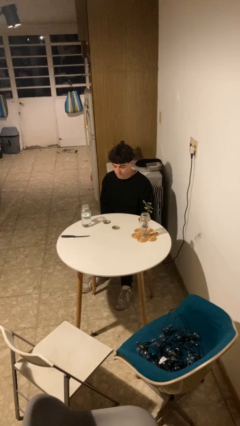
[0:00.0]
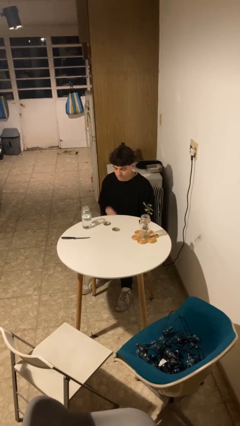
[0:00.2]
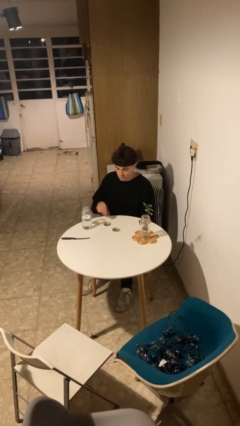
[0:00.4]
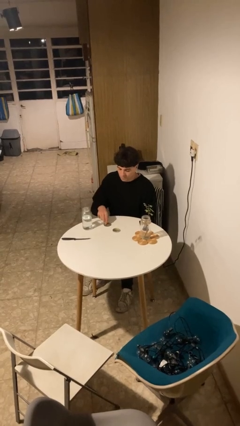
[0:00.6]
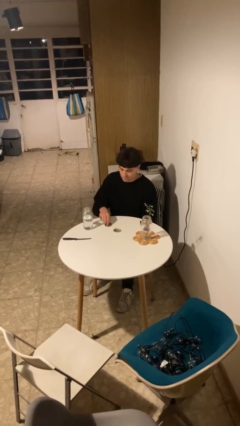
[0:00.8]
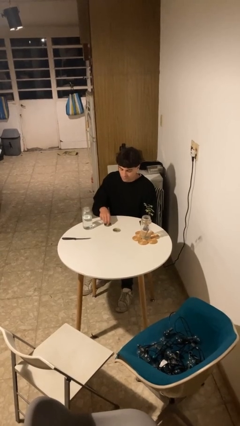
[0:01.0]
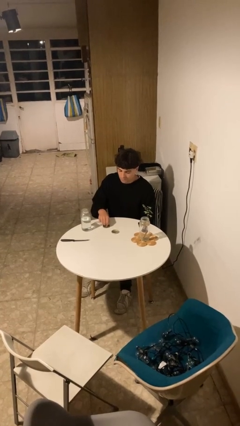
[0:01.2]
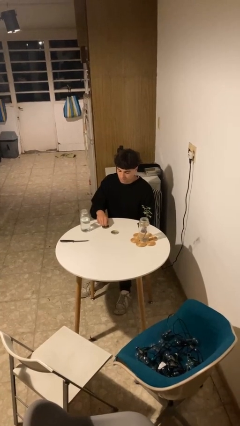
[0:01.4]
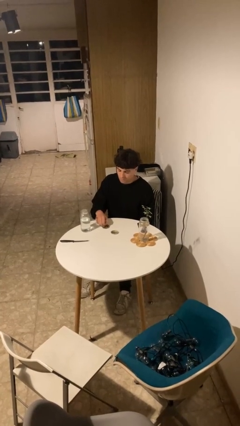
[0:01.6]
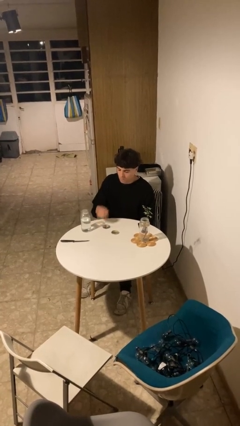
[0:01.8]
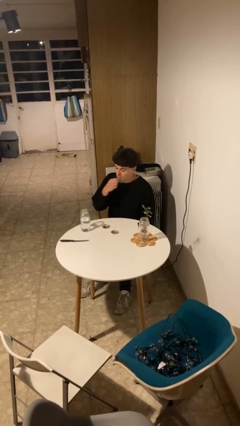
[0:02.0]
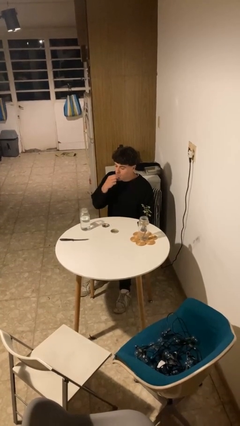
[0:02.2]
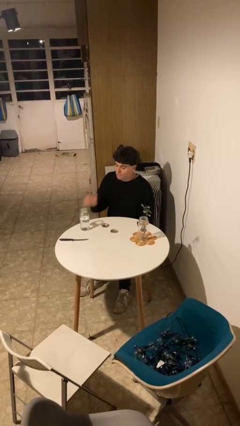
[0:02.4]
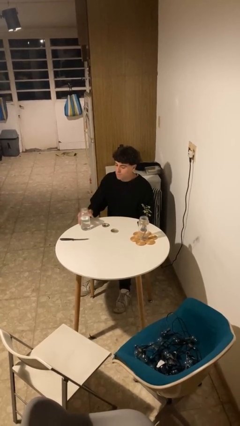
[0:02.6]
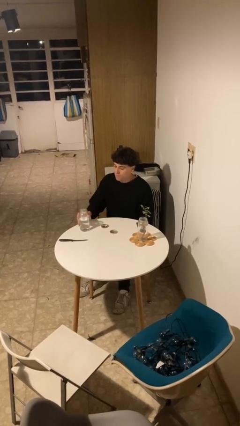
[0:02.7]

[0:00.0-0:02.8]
person takes medicine pills

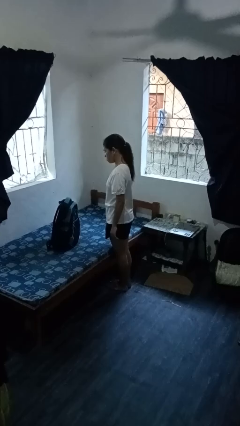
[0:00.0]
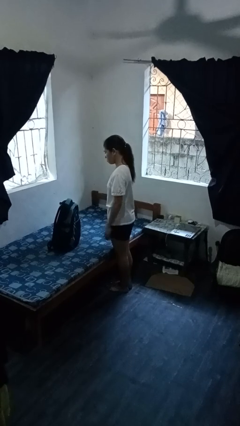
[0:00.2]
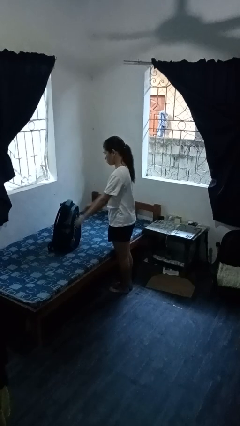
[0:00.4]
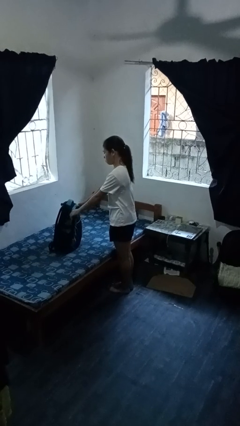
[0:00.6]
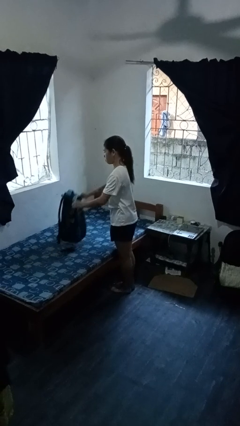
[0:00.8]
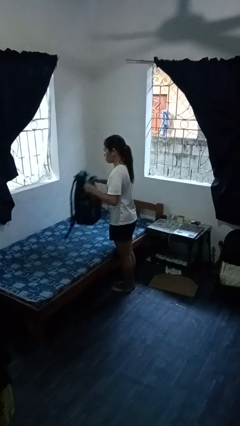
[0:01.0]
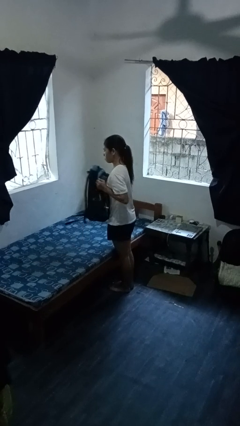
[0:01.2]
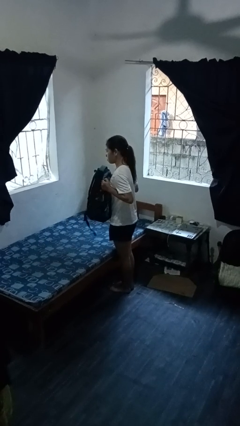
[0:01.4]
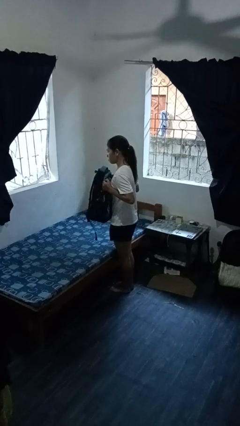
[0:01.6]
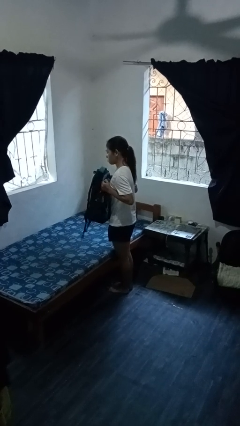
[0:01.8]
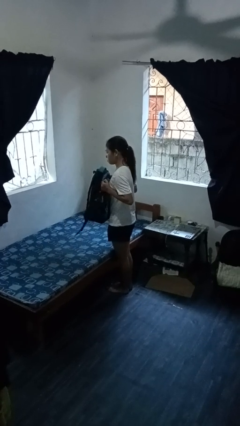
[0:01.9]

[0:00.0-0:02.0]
person picks up object from bed

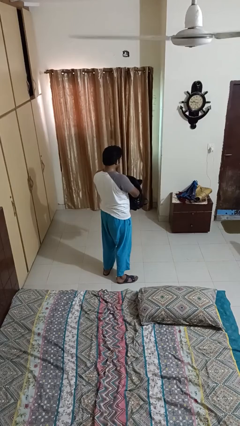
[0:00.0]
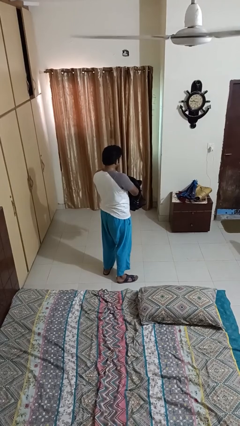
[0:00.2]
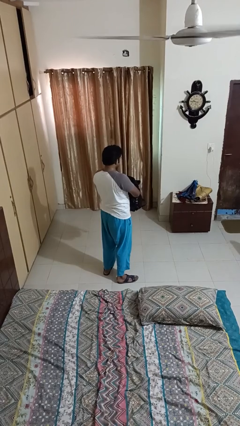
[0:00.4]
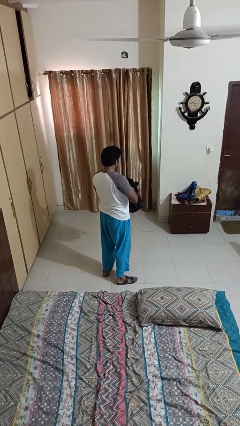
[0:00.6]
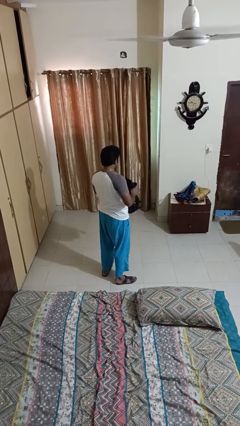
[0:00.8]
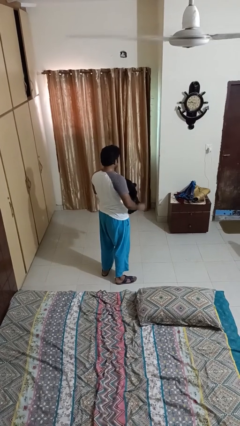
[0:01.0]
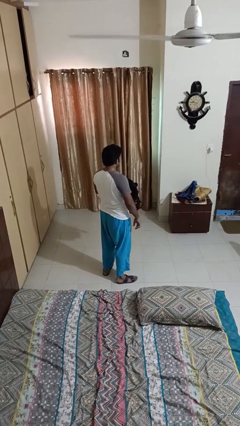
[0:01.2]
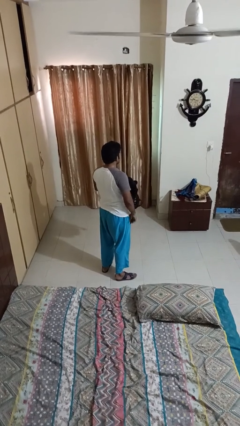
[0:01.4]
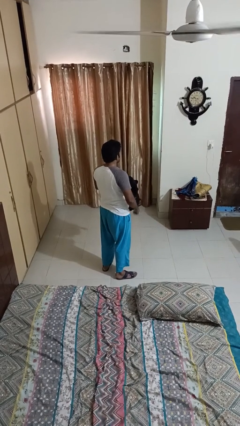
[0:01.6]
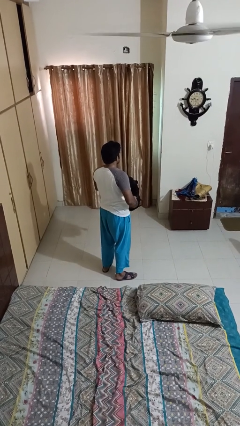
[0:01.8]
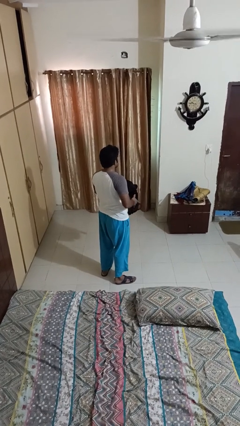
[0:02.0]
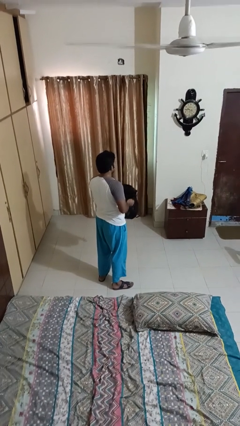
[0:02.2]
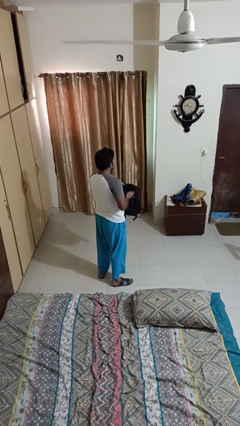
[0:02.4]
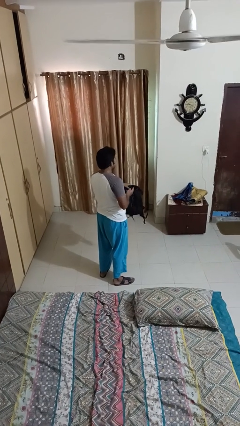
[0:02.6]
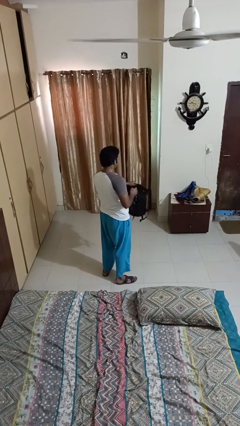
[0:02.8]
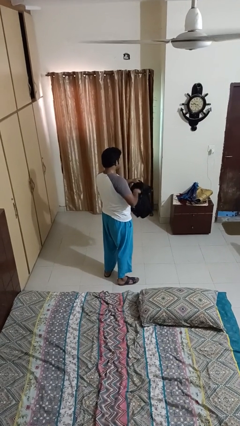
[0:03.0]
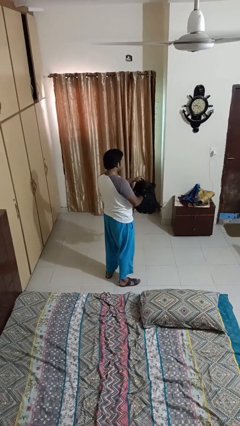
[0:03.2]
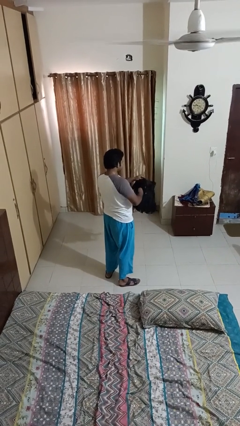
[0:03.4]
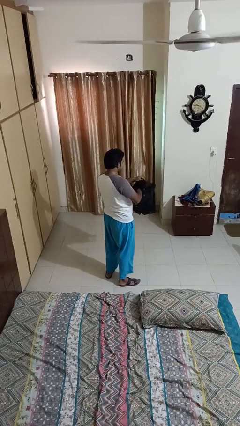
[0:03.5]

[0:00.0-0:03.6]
person stands up

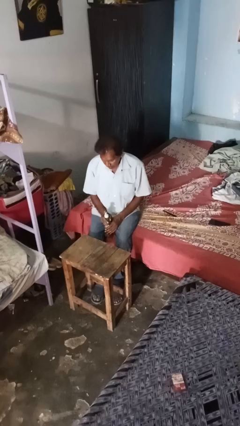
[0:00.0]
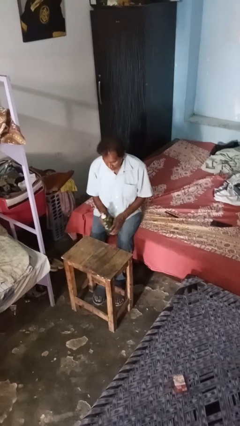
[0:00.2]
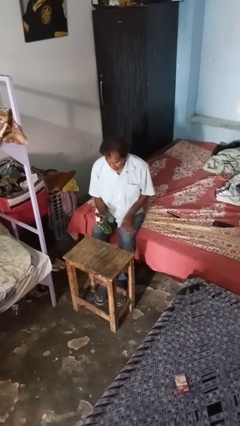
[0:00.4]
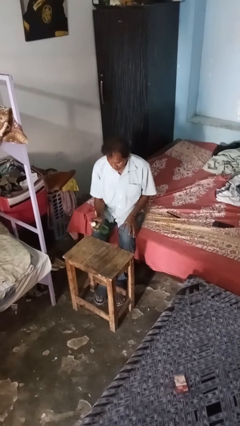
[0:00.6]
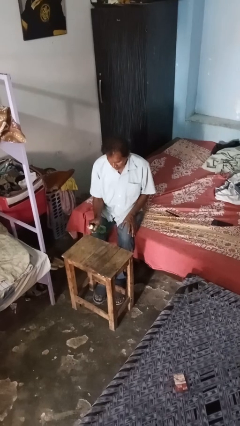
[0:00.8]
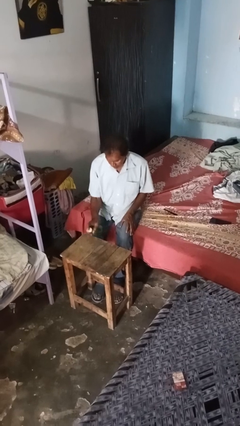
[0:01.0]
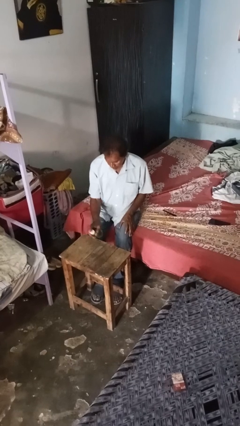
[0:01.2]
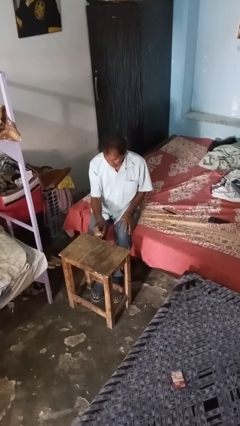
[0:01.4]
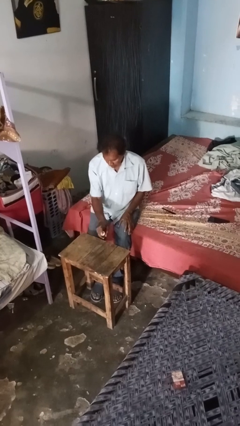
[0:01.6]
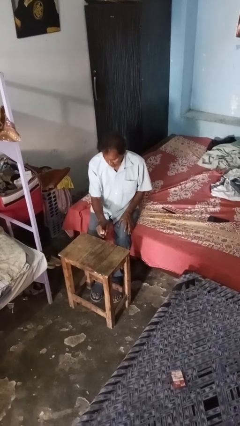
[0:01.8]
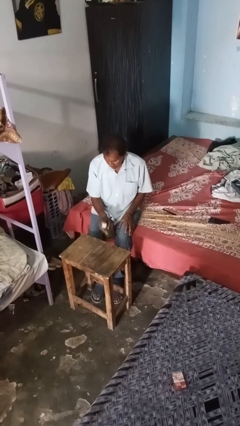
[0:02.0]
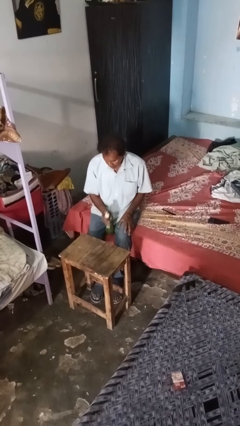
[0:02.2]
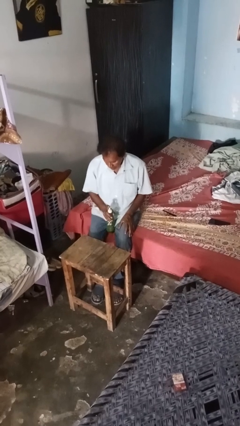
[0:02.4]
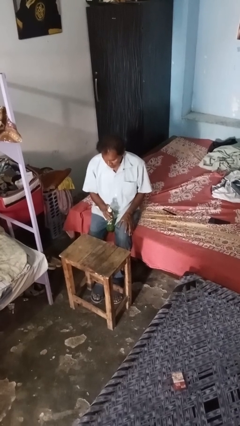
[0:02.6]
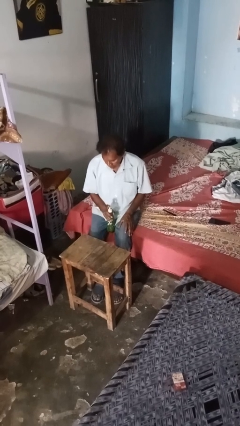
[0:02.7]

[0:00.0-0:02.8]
person sprays from bottle

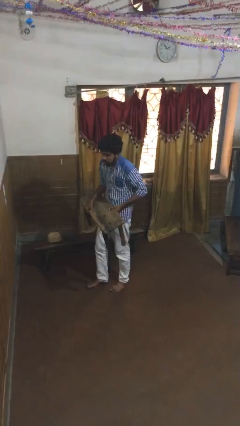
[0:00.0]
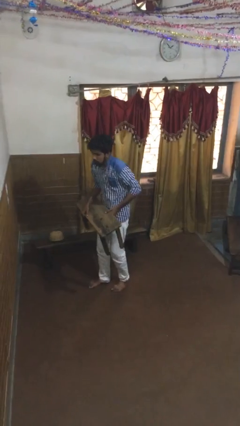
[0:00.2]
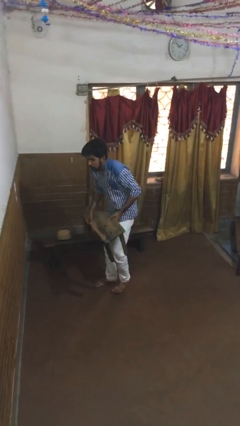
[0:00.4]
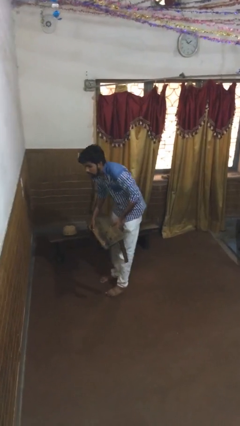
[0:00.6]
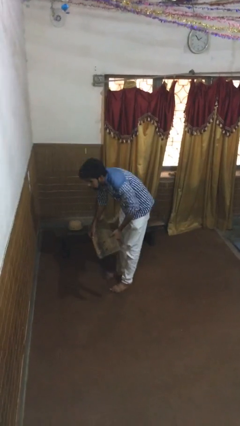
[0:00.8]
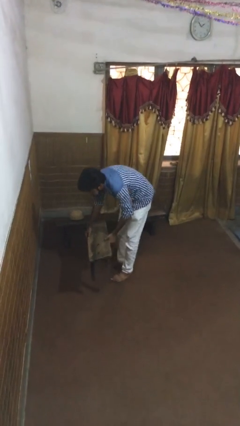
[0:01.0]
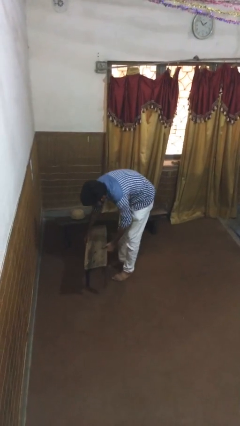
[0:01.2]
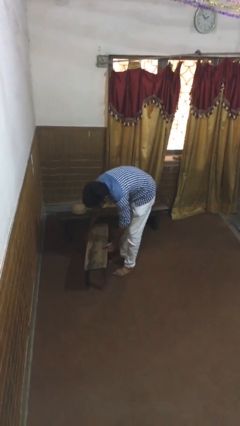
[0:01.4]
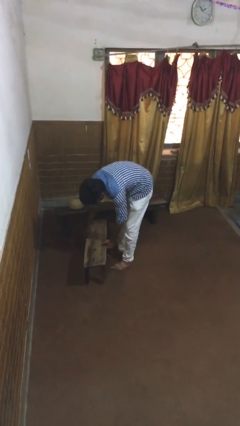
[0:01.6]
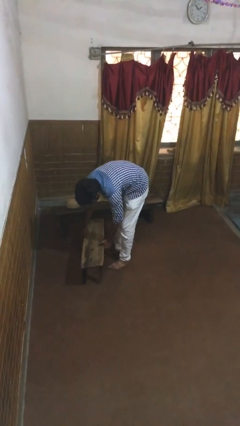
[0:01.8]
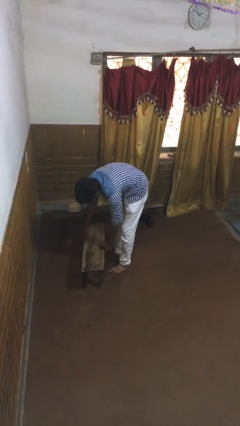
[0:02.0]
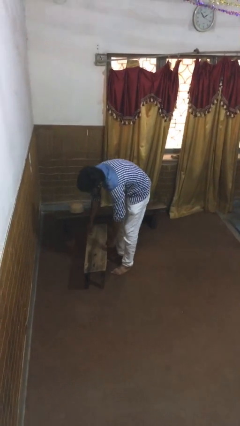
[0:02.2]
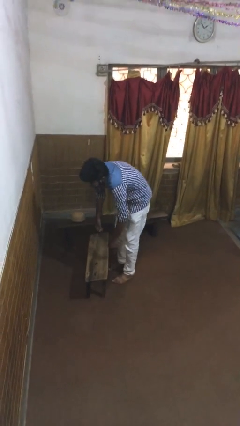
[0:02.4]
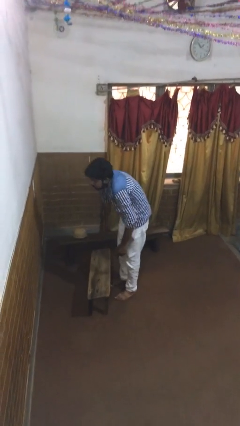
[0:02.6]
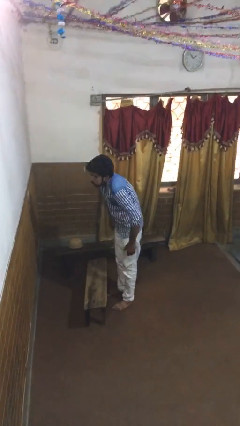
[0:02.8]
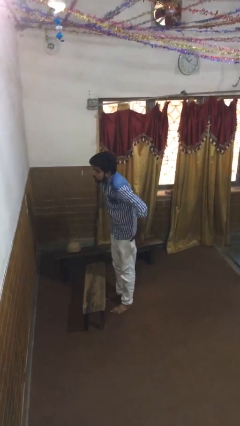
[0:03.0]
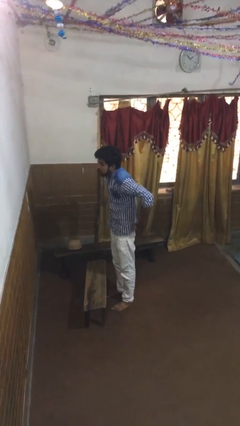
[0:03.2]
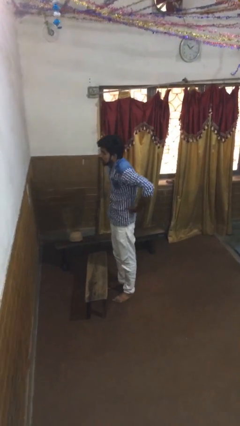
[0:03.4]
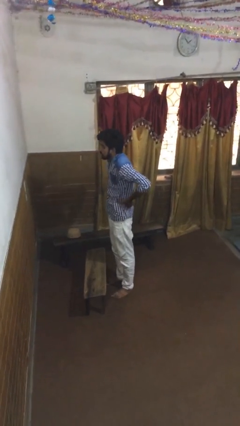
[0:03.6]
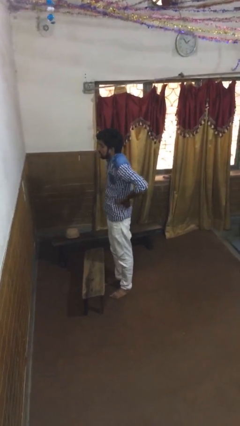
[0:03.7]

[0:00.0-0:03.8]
person puts down object on floor

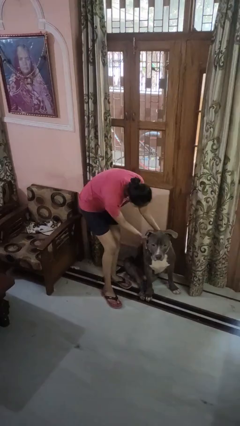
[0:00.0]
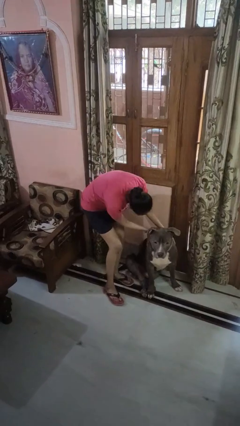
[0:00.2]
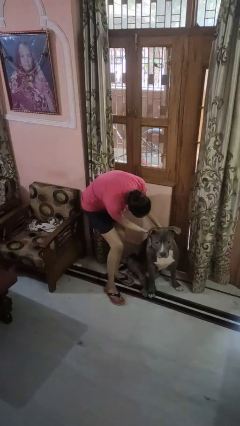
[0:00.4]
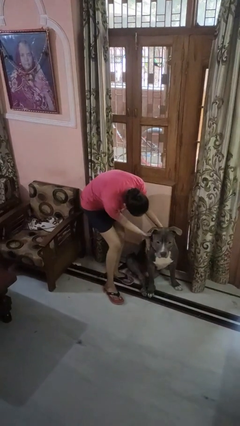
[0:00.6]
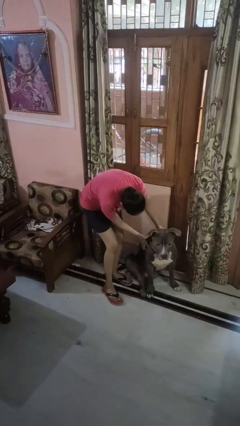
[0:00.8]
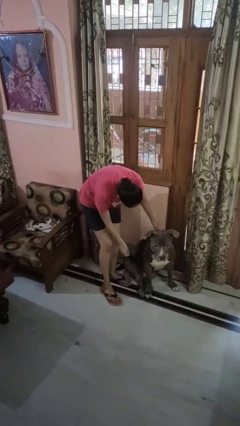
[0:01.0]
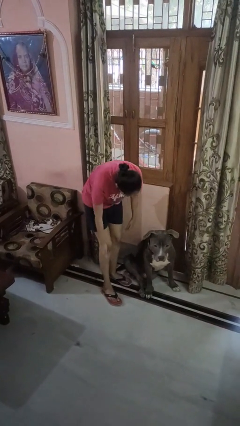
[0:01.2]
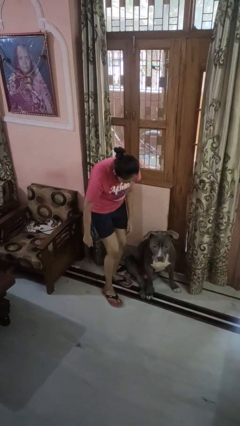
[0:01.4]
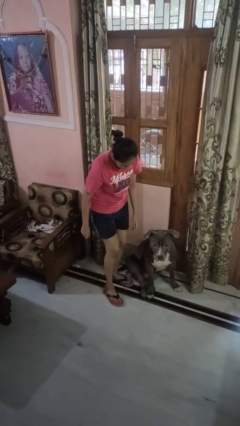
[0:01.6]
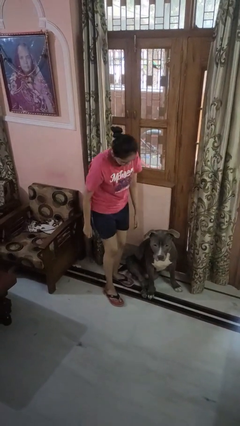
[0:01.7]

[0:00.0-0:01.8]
person pets dog

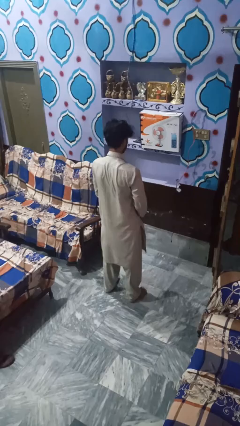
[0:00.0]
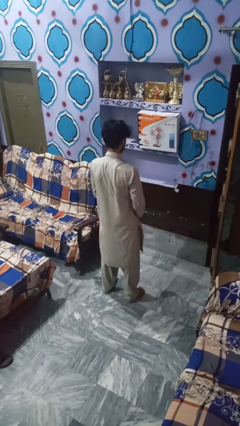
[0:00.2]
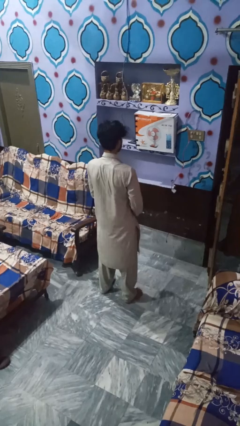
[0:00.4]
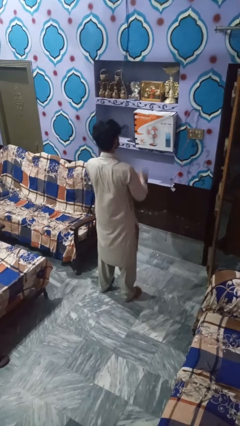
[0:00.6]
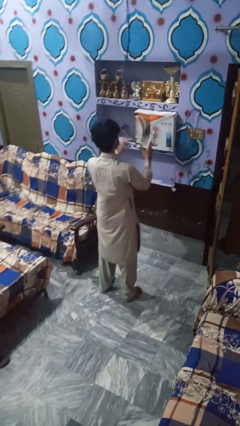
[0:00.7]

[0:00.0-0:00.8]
person drops object
